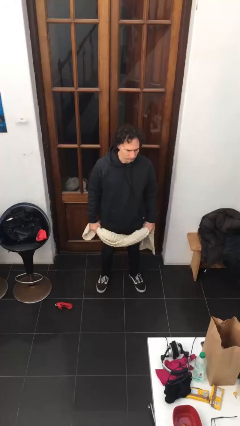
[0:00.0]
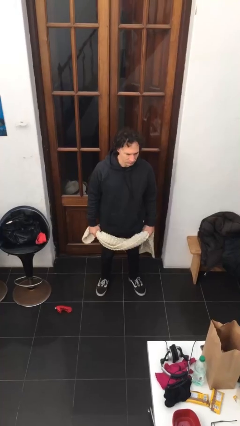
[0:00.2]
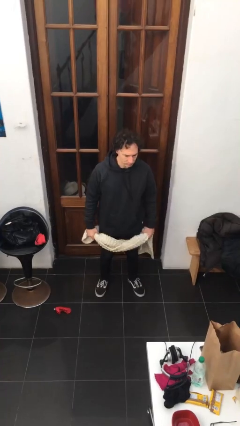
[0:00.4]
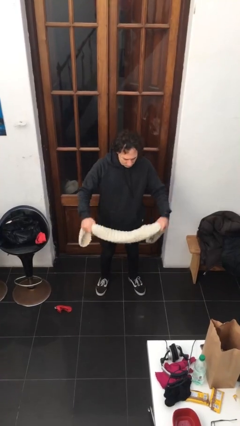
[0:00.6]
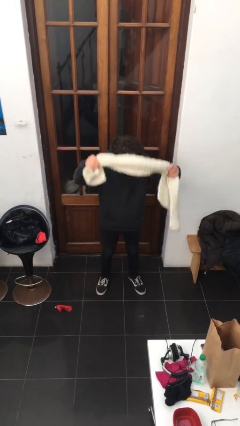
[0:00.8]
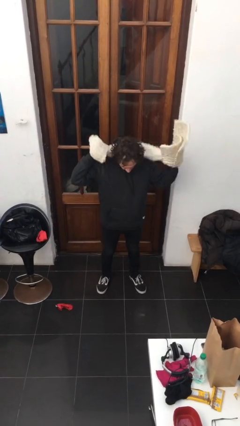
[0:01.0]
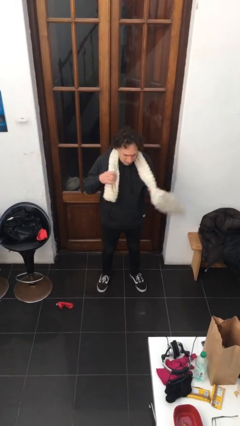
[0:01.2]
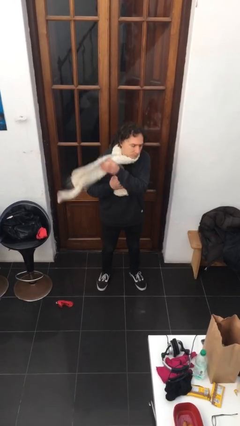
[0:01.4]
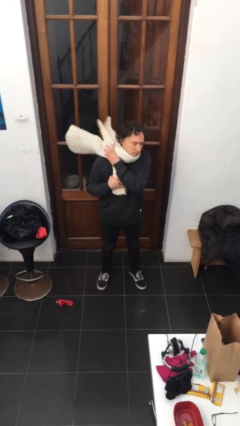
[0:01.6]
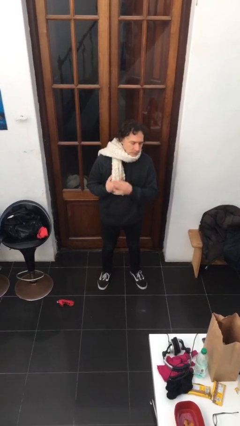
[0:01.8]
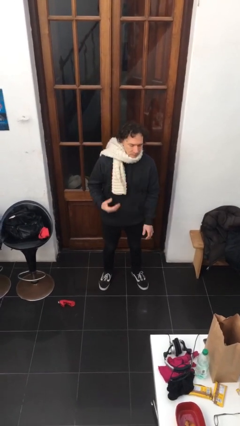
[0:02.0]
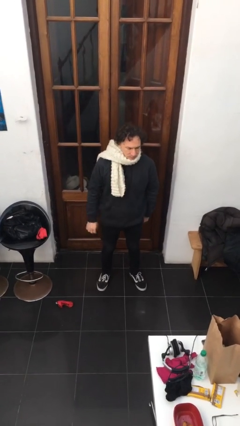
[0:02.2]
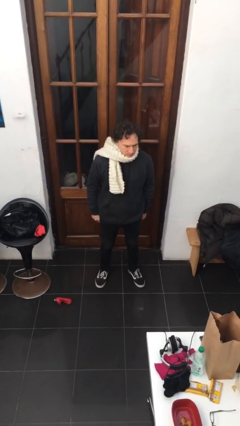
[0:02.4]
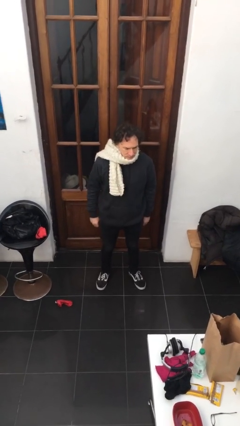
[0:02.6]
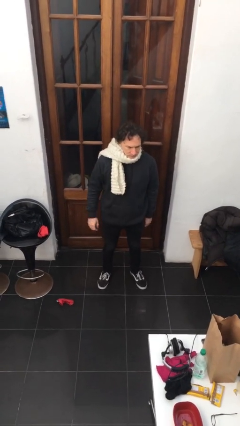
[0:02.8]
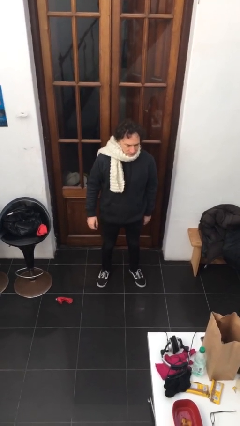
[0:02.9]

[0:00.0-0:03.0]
person puts on scarf

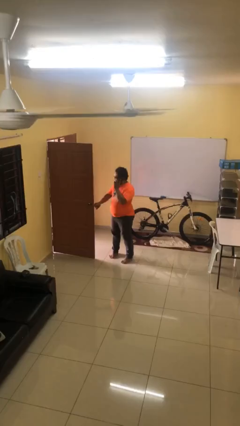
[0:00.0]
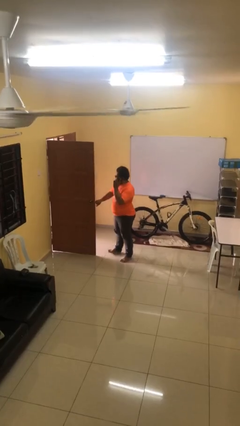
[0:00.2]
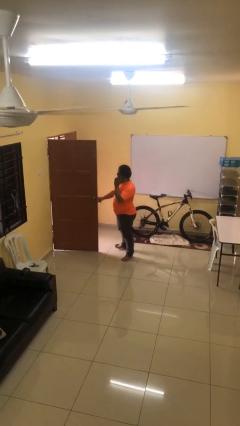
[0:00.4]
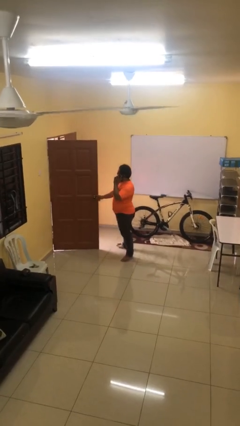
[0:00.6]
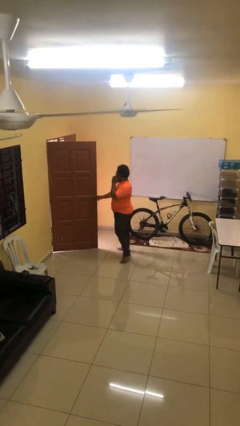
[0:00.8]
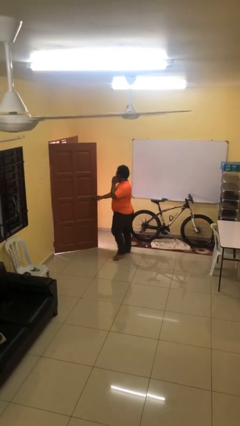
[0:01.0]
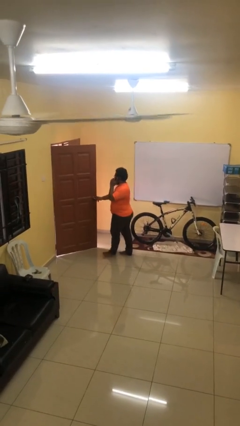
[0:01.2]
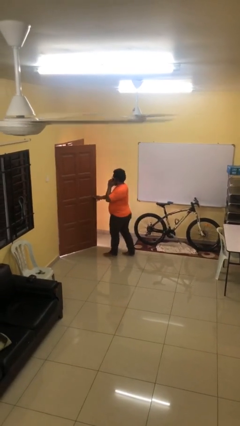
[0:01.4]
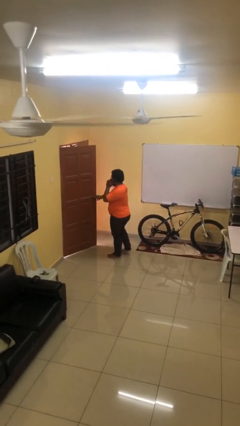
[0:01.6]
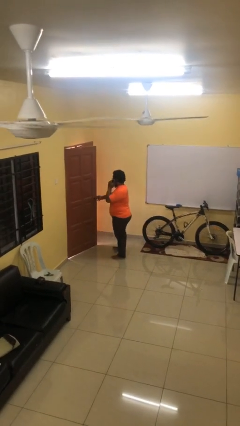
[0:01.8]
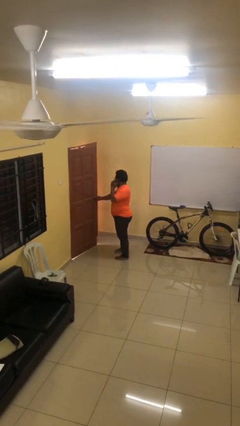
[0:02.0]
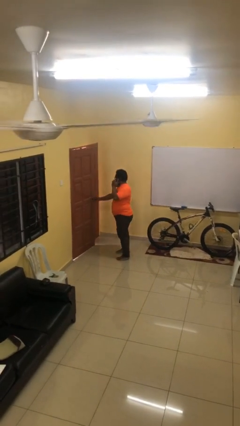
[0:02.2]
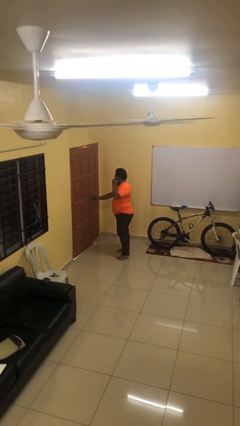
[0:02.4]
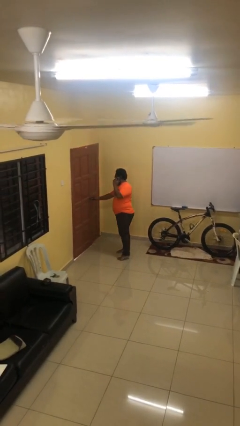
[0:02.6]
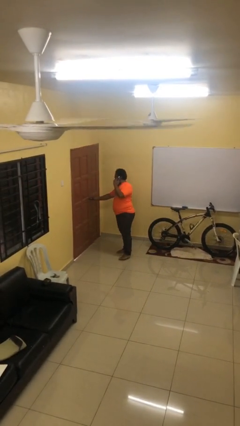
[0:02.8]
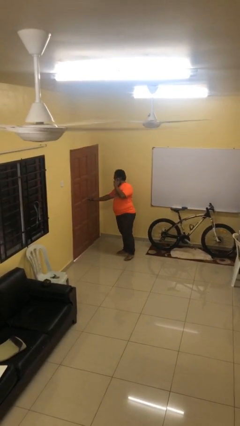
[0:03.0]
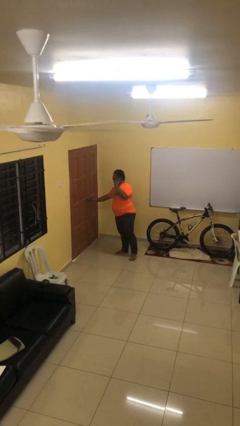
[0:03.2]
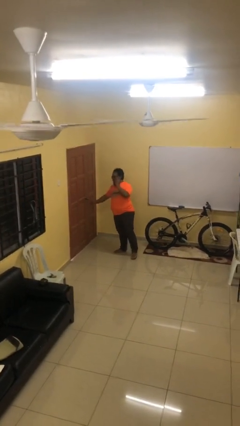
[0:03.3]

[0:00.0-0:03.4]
person closes facility door

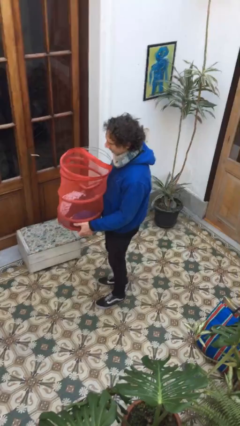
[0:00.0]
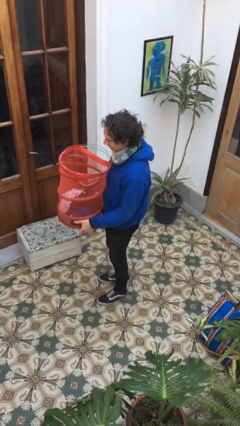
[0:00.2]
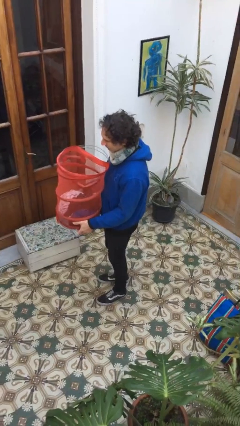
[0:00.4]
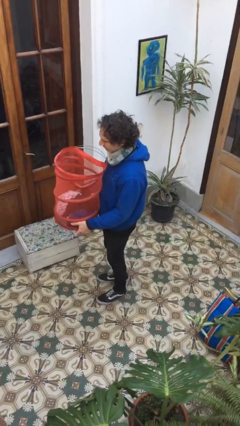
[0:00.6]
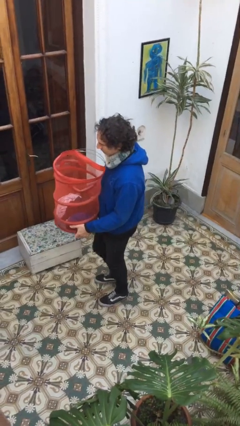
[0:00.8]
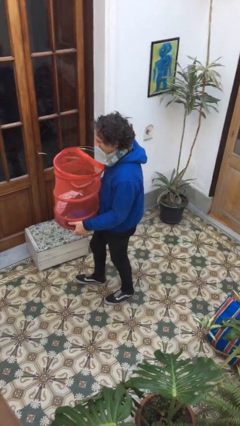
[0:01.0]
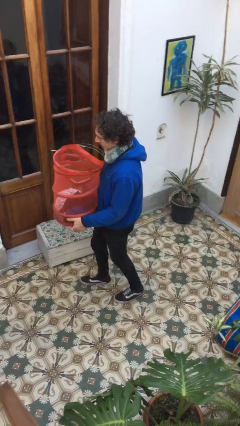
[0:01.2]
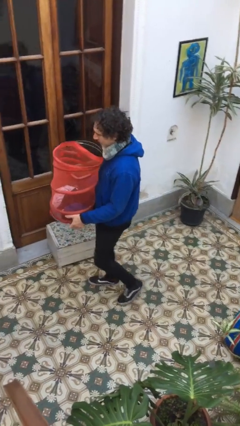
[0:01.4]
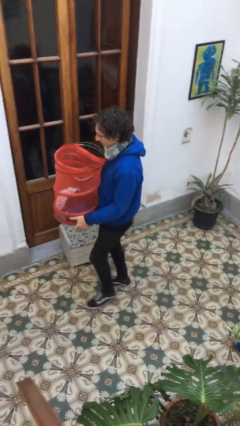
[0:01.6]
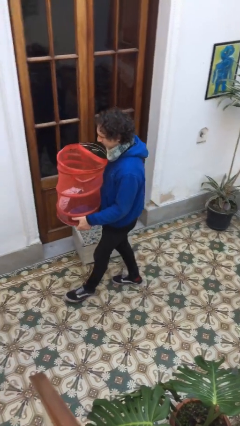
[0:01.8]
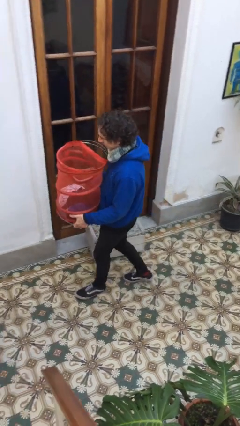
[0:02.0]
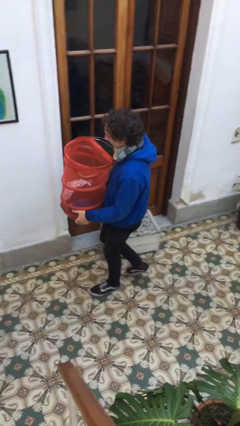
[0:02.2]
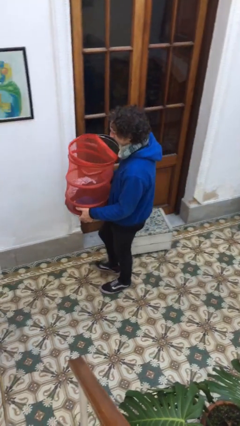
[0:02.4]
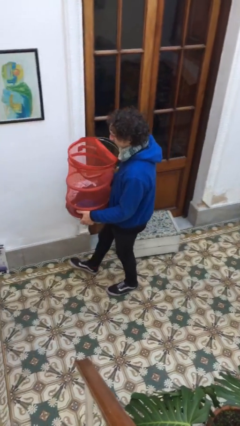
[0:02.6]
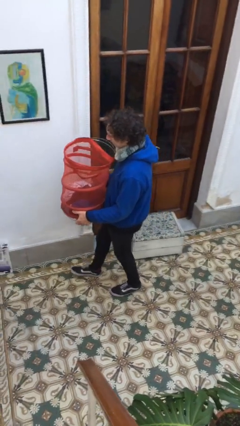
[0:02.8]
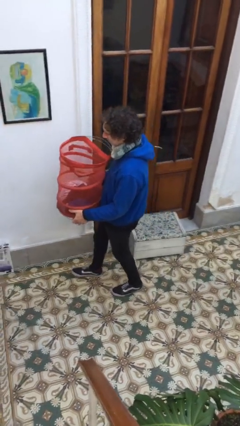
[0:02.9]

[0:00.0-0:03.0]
person carries laundry basket

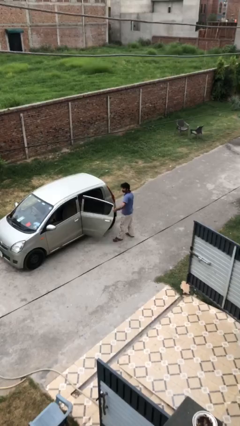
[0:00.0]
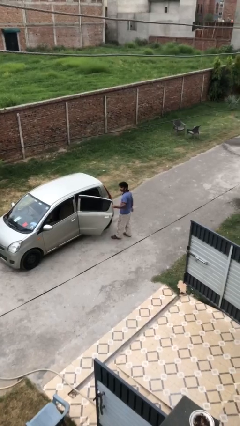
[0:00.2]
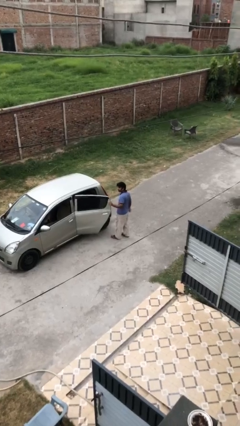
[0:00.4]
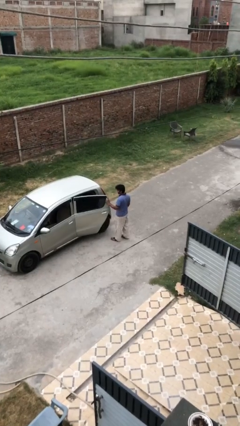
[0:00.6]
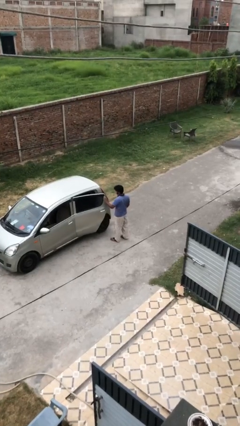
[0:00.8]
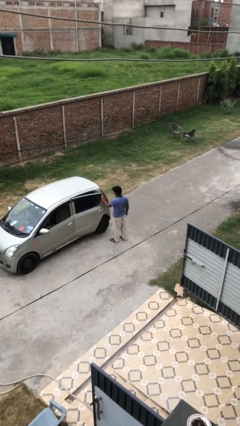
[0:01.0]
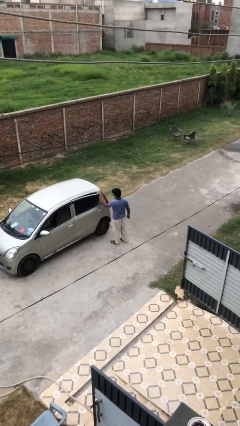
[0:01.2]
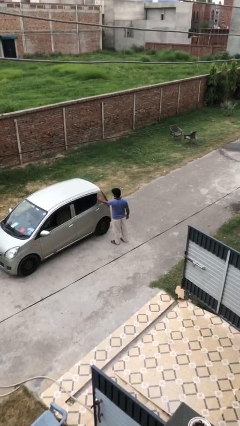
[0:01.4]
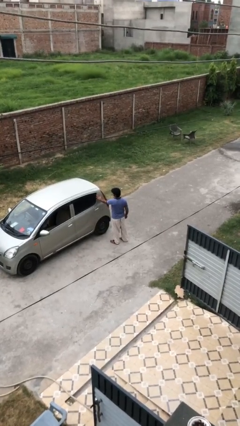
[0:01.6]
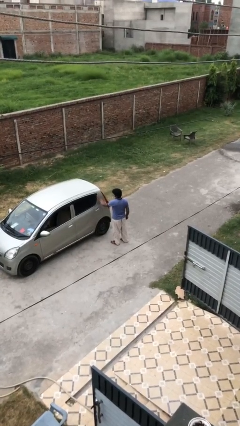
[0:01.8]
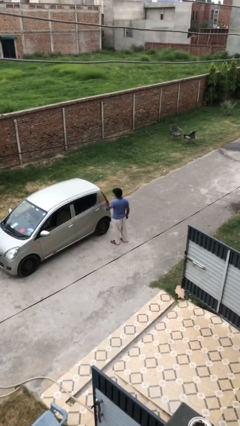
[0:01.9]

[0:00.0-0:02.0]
person closes car door

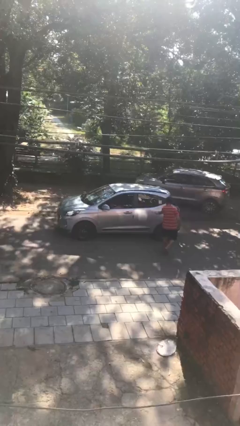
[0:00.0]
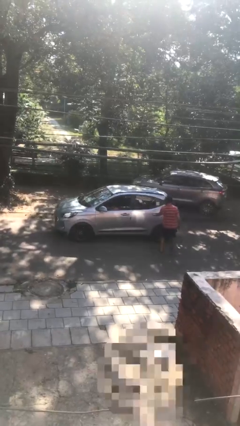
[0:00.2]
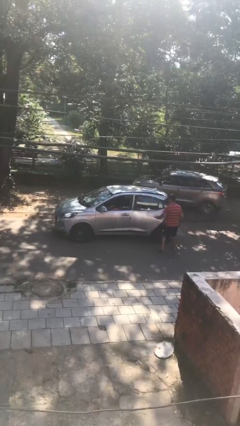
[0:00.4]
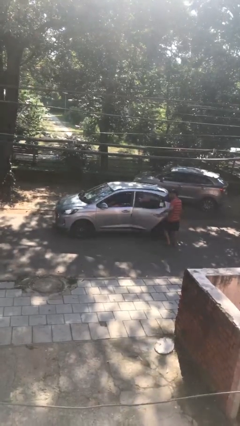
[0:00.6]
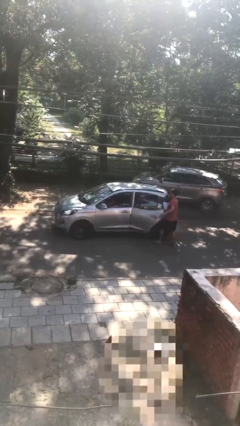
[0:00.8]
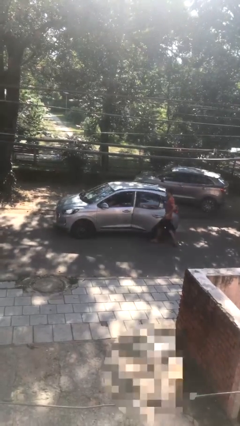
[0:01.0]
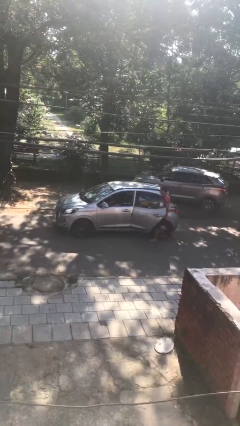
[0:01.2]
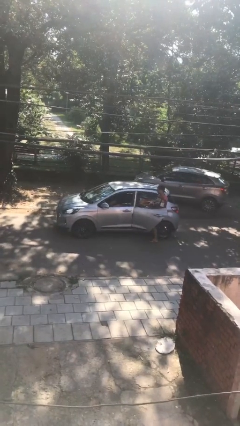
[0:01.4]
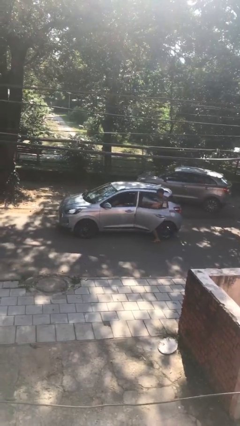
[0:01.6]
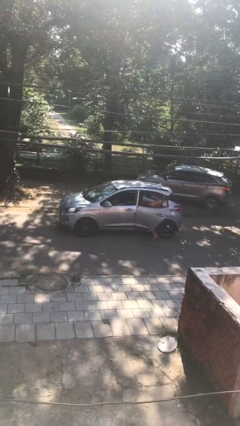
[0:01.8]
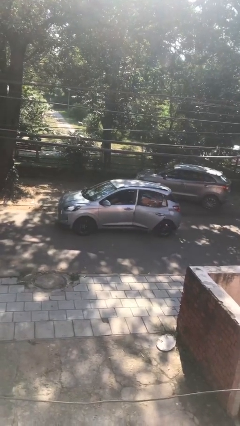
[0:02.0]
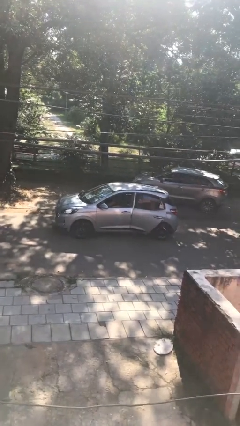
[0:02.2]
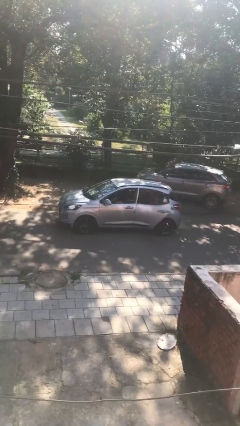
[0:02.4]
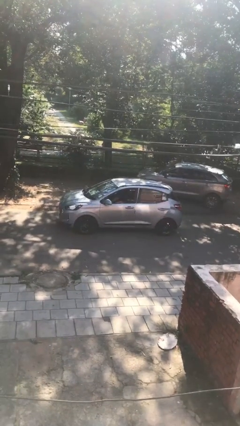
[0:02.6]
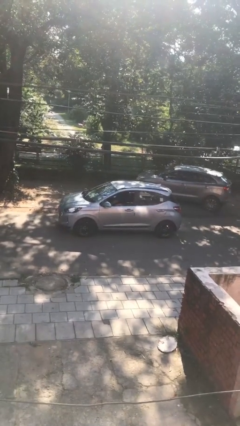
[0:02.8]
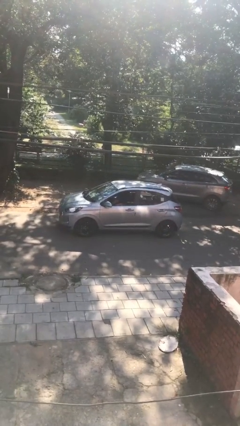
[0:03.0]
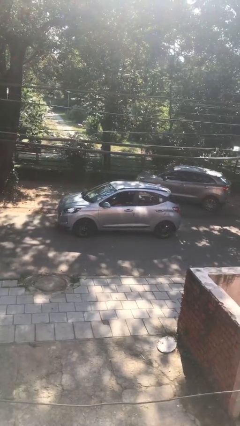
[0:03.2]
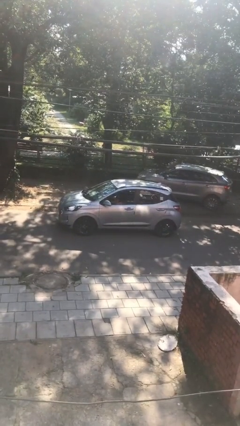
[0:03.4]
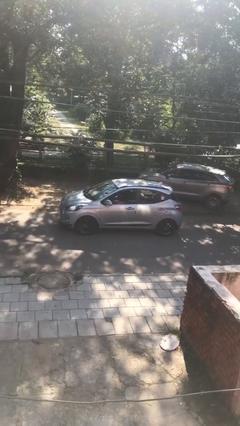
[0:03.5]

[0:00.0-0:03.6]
car picks up person

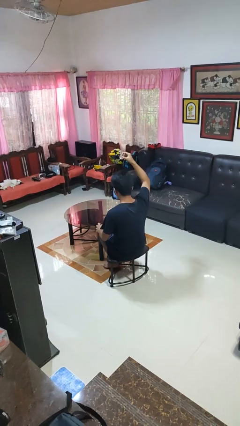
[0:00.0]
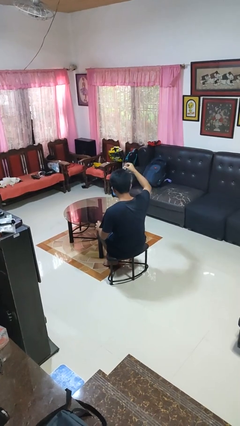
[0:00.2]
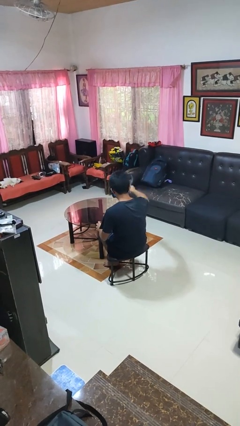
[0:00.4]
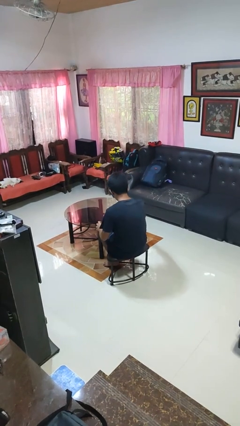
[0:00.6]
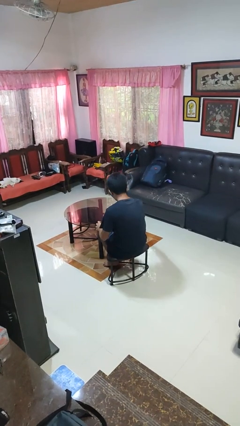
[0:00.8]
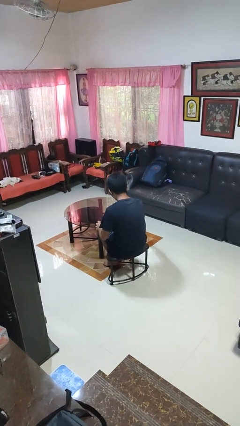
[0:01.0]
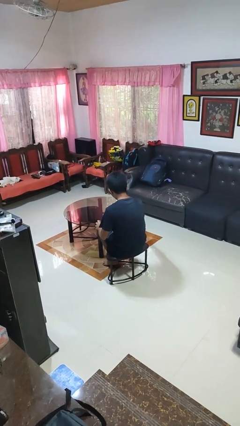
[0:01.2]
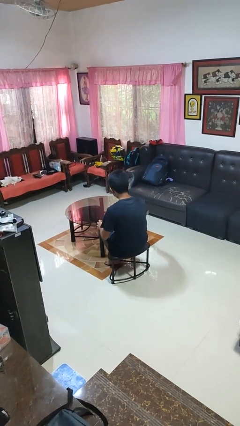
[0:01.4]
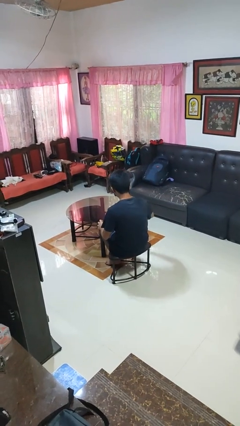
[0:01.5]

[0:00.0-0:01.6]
person puts down object on table

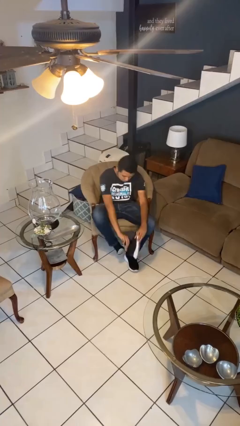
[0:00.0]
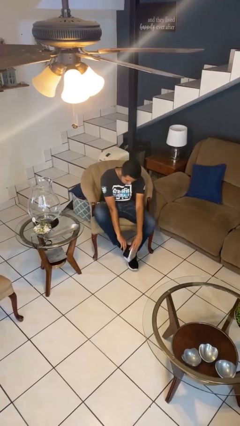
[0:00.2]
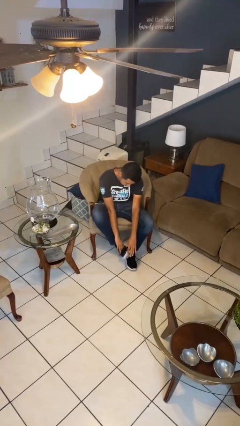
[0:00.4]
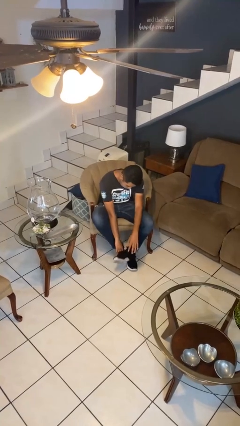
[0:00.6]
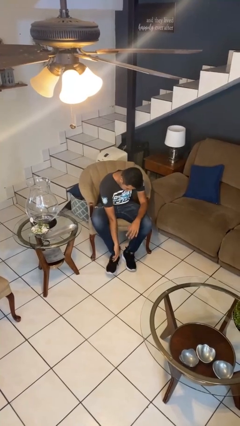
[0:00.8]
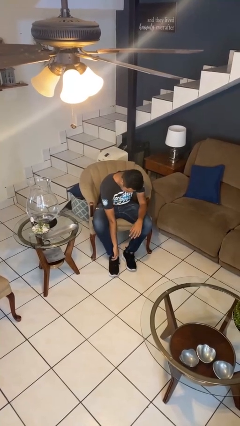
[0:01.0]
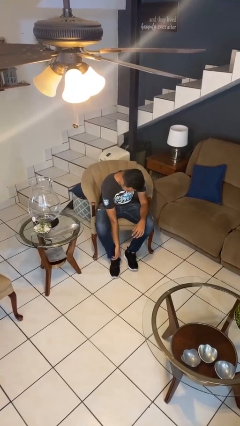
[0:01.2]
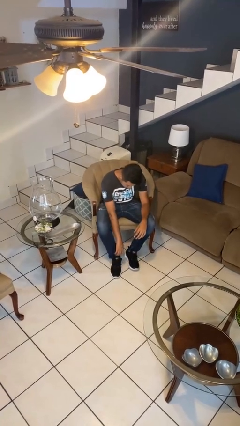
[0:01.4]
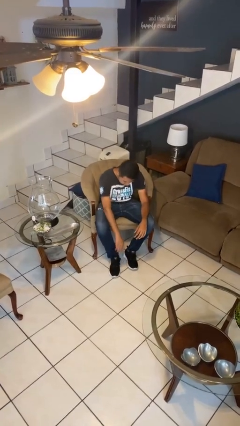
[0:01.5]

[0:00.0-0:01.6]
person puts on headphones
